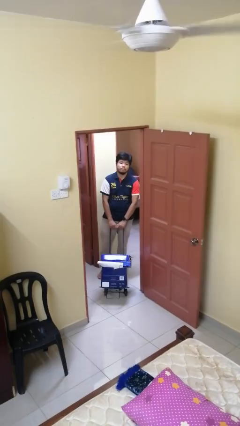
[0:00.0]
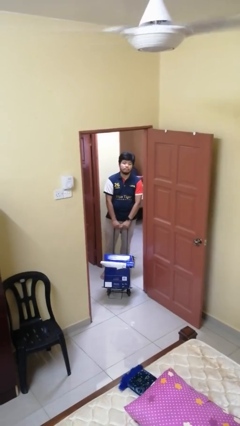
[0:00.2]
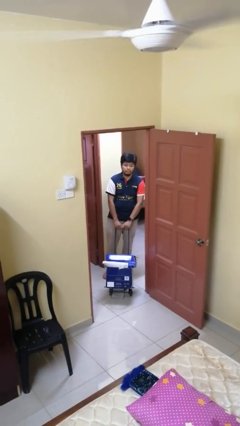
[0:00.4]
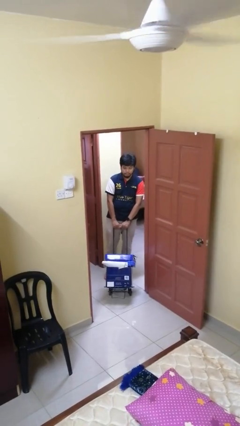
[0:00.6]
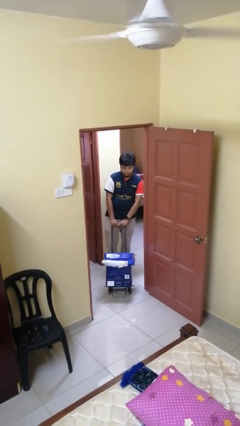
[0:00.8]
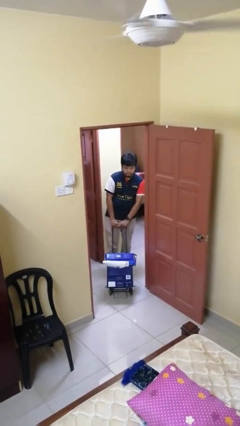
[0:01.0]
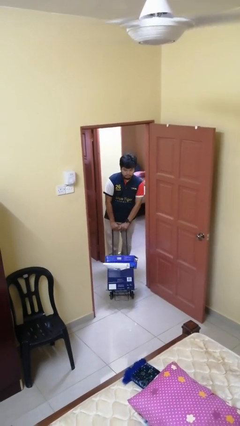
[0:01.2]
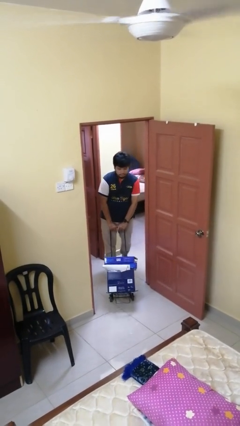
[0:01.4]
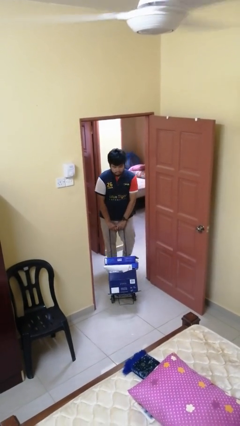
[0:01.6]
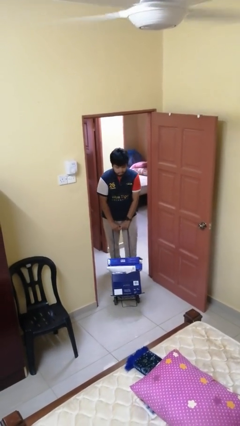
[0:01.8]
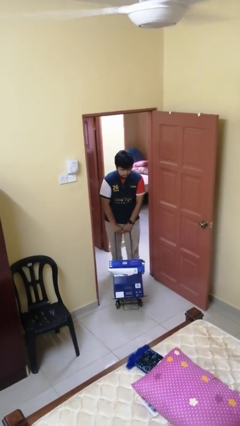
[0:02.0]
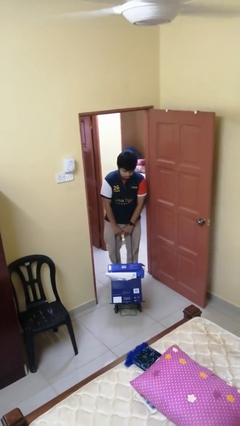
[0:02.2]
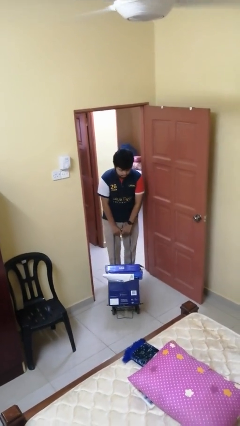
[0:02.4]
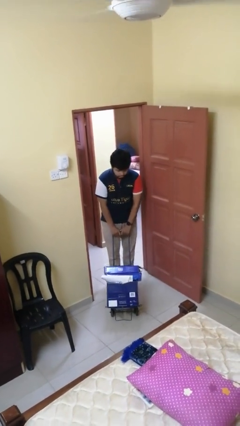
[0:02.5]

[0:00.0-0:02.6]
person pushes wheeled cart

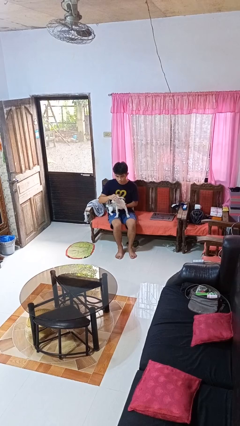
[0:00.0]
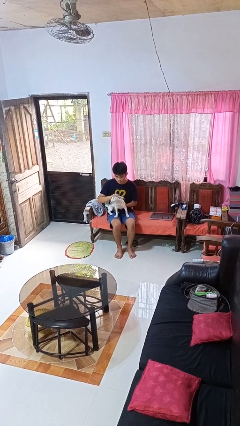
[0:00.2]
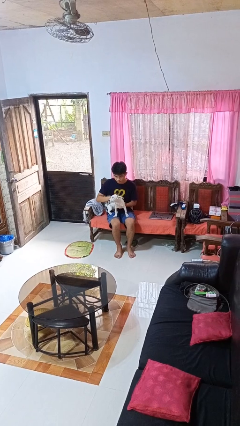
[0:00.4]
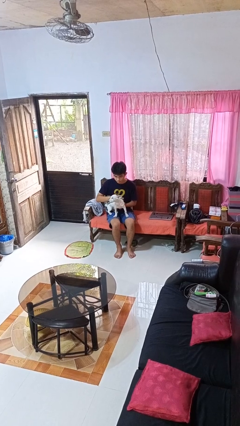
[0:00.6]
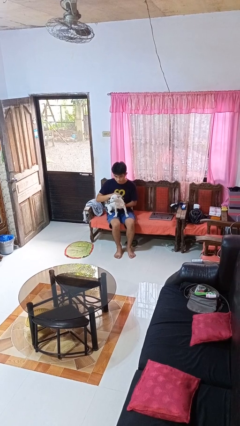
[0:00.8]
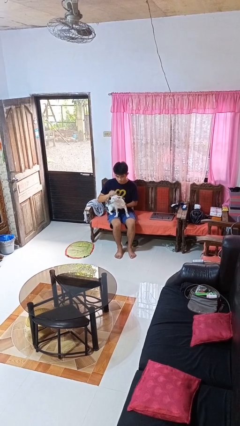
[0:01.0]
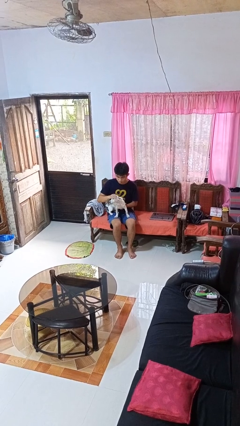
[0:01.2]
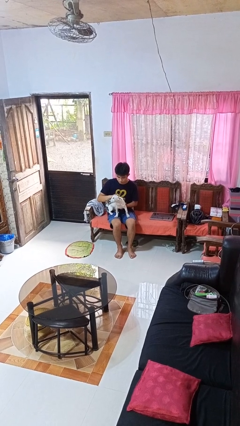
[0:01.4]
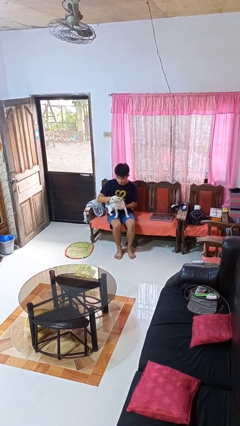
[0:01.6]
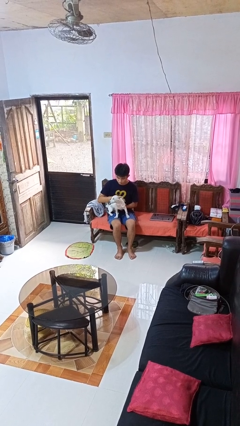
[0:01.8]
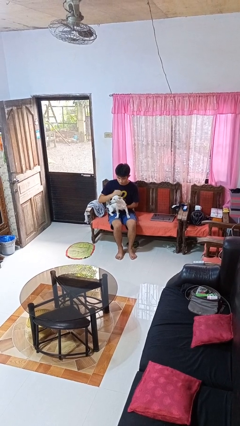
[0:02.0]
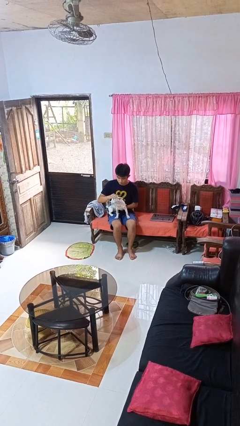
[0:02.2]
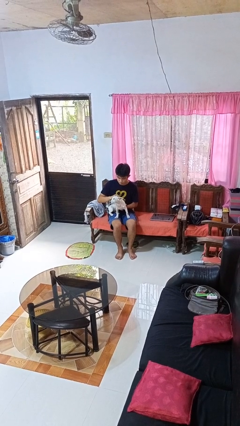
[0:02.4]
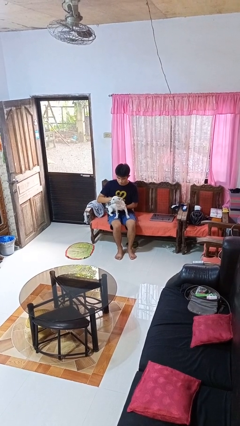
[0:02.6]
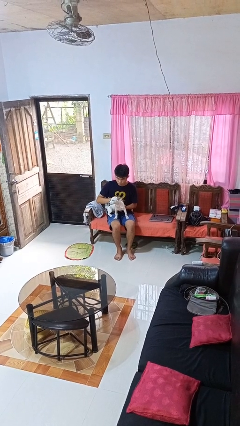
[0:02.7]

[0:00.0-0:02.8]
person pets dog

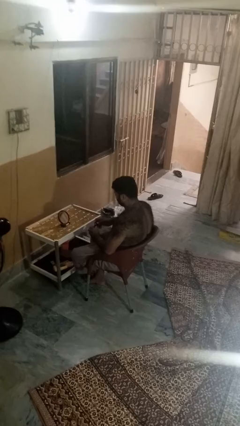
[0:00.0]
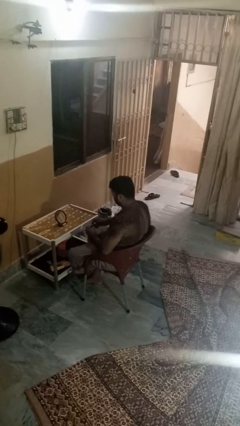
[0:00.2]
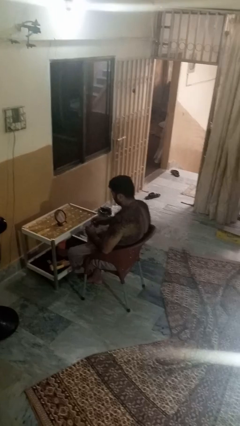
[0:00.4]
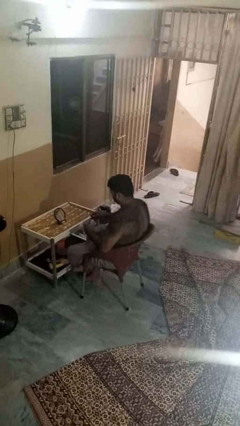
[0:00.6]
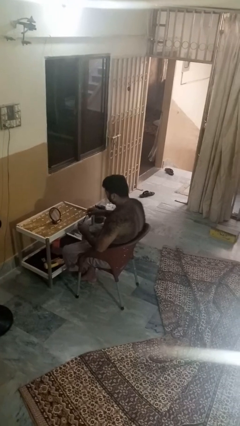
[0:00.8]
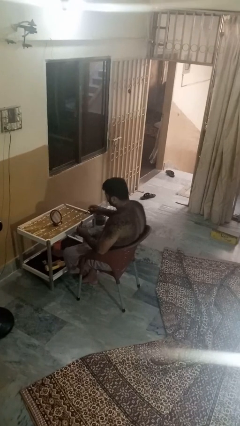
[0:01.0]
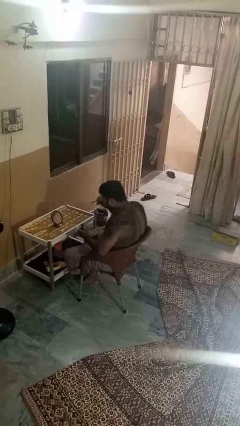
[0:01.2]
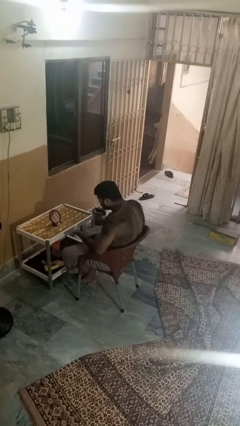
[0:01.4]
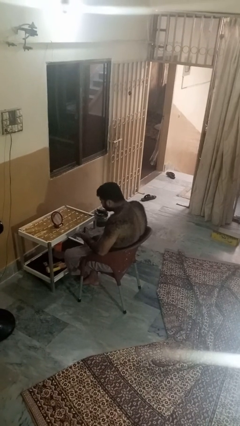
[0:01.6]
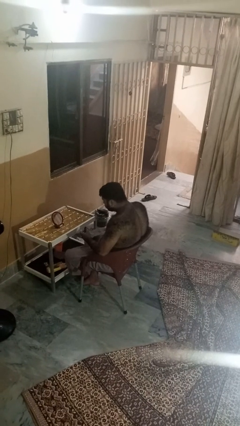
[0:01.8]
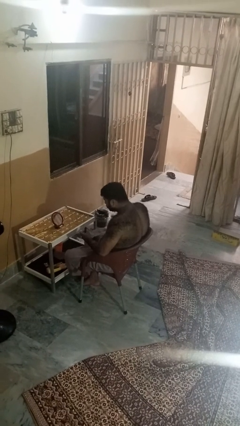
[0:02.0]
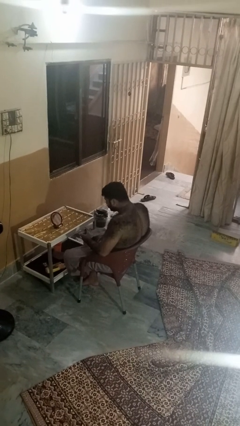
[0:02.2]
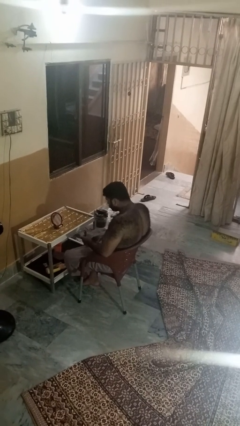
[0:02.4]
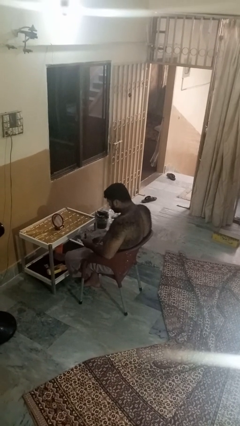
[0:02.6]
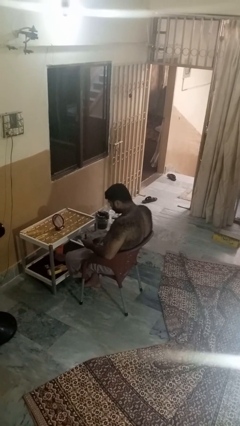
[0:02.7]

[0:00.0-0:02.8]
person applies eye makeup

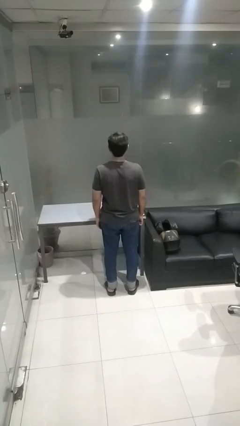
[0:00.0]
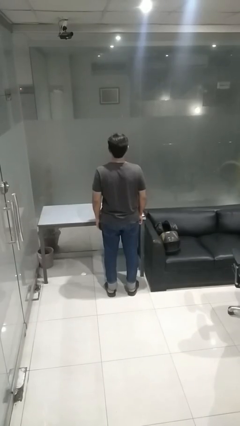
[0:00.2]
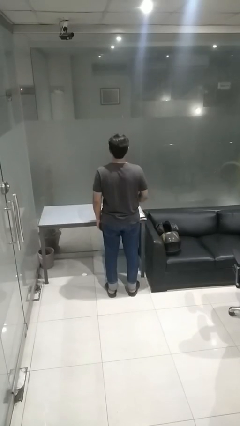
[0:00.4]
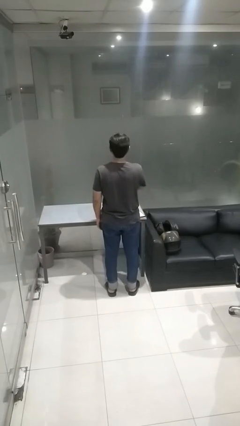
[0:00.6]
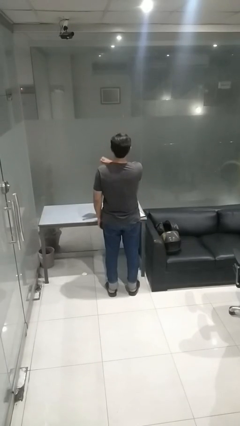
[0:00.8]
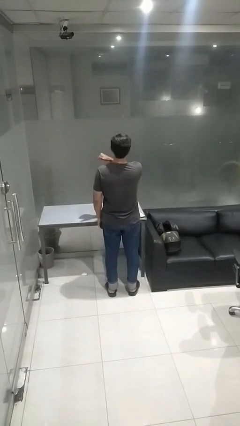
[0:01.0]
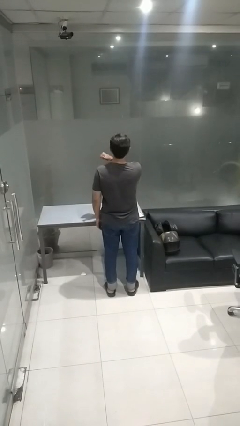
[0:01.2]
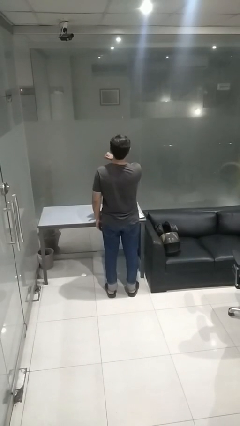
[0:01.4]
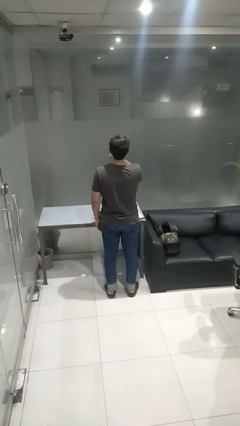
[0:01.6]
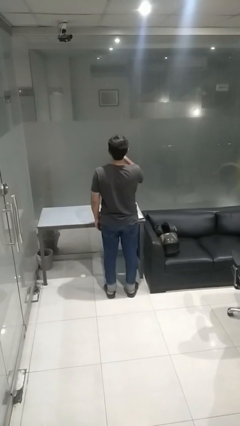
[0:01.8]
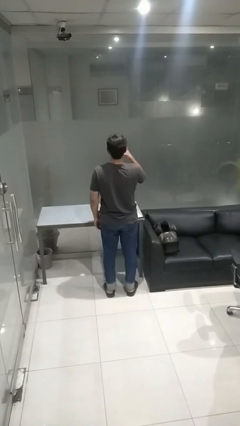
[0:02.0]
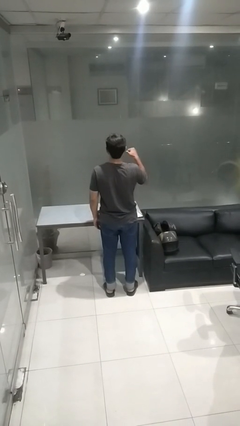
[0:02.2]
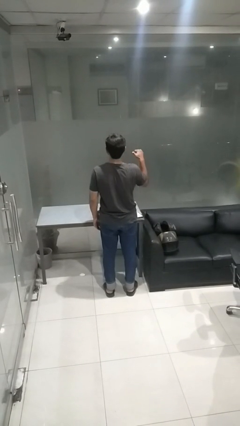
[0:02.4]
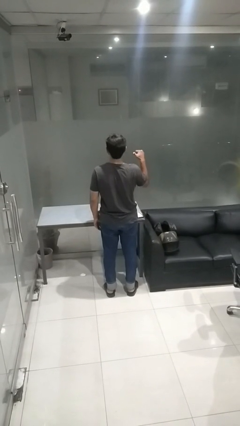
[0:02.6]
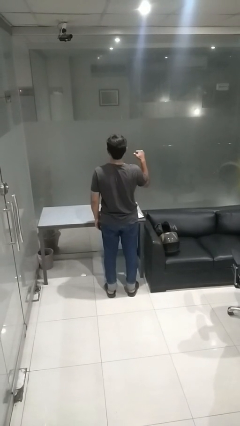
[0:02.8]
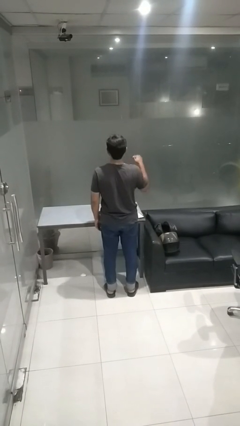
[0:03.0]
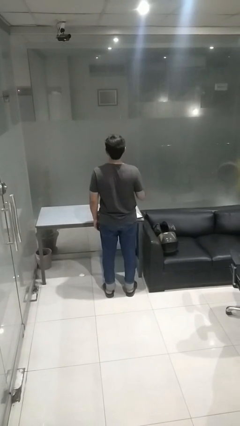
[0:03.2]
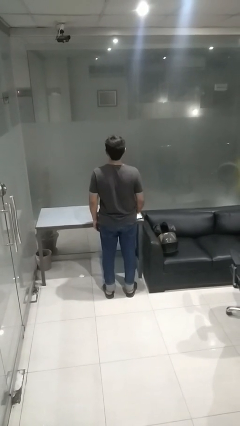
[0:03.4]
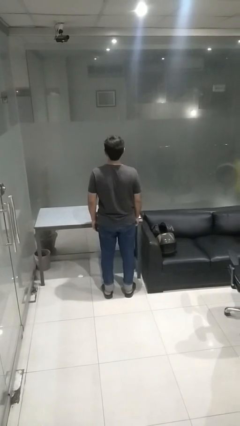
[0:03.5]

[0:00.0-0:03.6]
person gestures cut

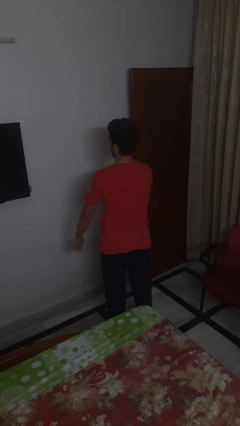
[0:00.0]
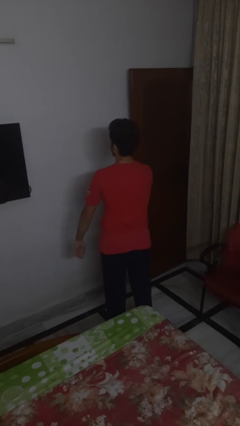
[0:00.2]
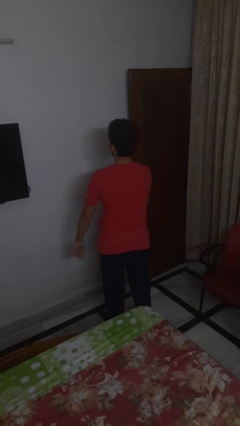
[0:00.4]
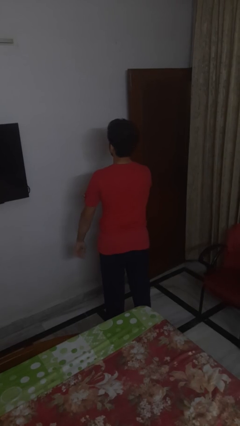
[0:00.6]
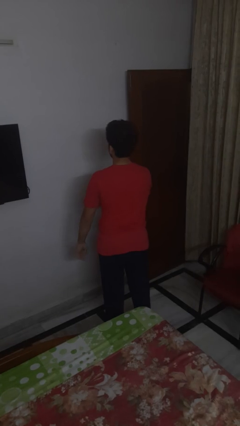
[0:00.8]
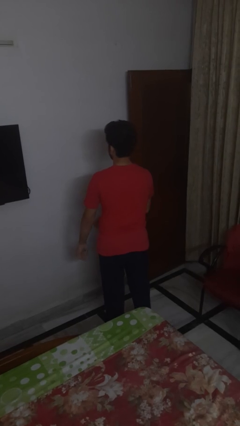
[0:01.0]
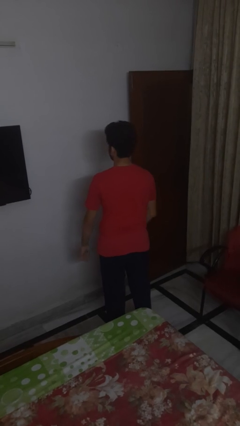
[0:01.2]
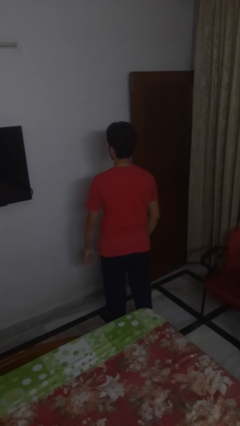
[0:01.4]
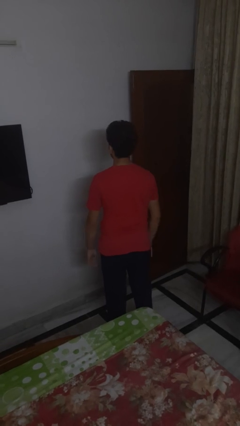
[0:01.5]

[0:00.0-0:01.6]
person swats bug

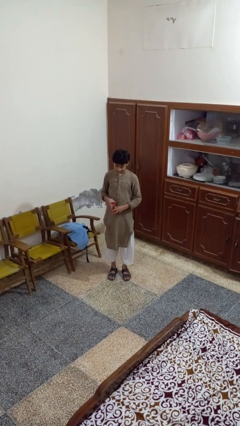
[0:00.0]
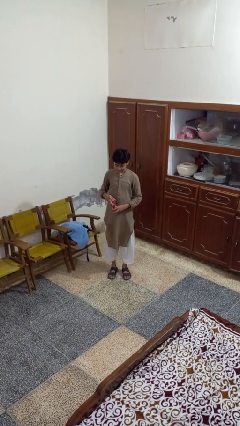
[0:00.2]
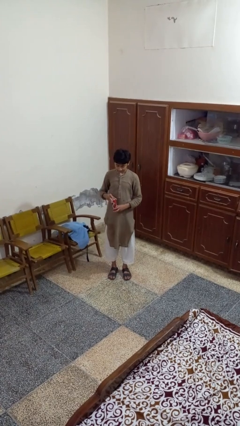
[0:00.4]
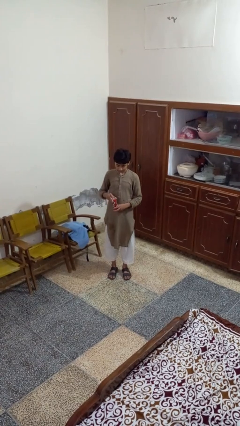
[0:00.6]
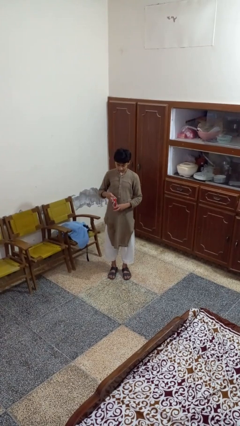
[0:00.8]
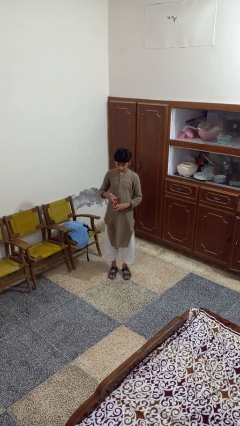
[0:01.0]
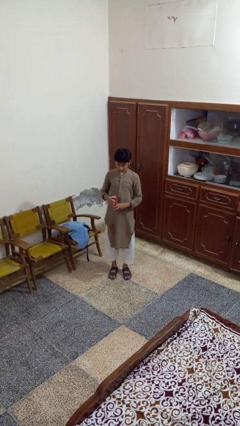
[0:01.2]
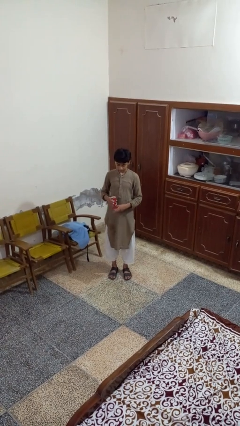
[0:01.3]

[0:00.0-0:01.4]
person opens beverage can

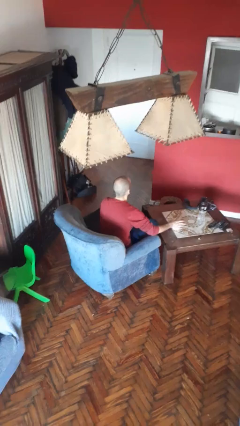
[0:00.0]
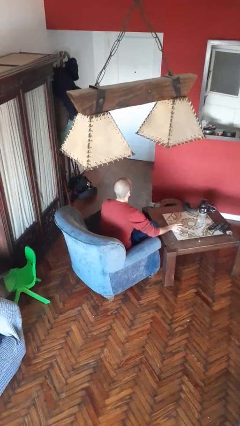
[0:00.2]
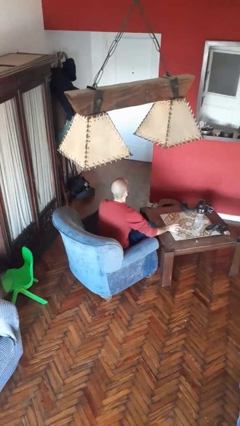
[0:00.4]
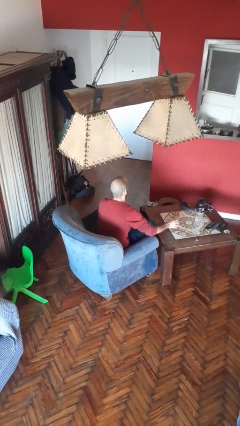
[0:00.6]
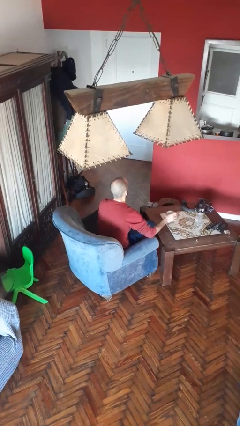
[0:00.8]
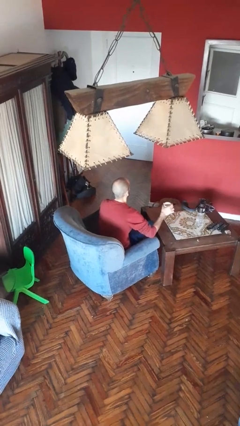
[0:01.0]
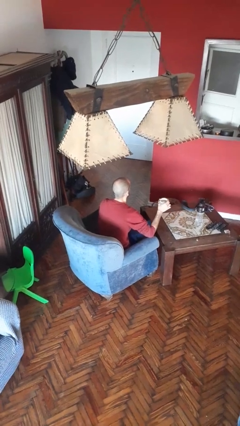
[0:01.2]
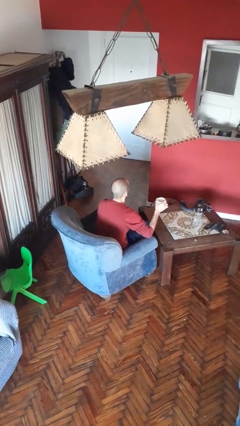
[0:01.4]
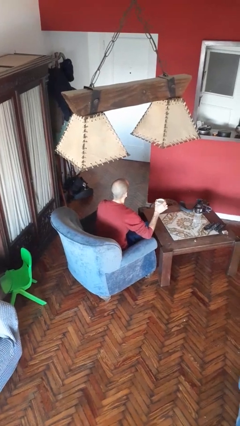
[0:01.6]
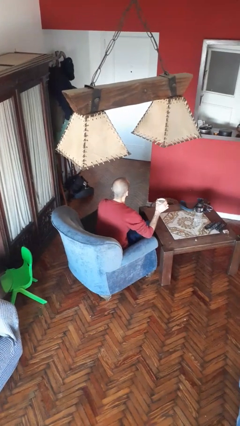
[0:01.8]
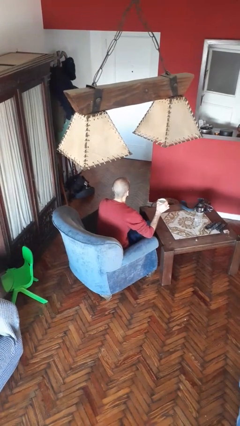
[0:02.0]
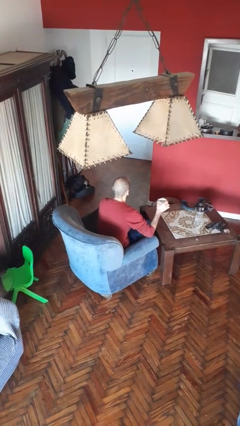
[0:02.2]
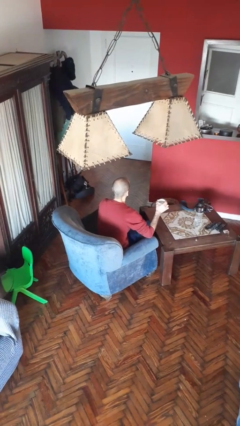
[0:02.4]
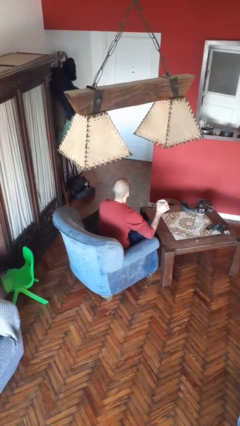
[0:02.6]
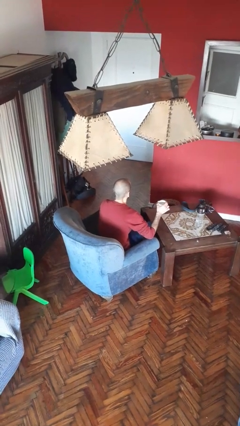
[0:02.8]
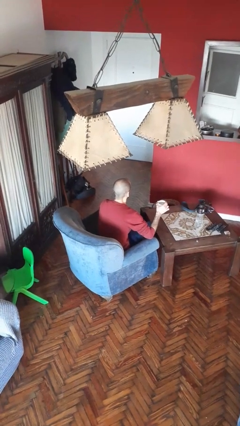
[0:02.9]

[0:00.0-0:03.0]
person picks up object from table
